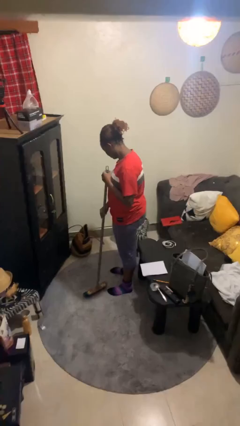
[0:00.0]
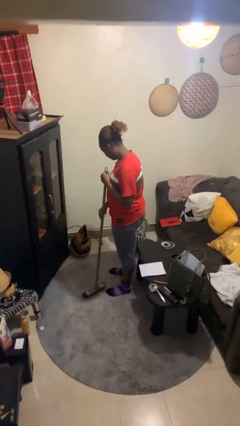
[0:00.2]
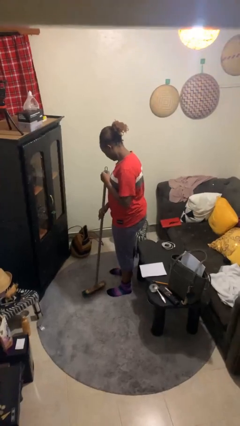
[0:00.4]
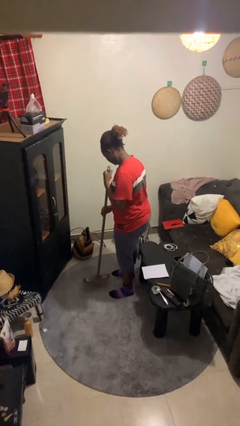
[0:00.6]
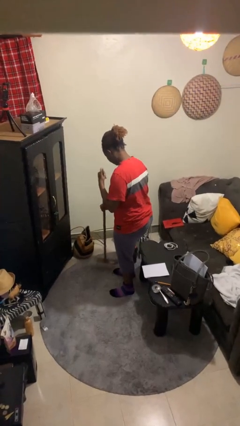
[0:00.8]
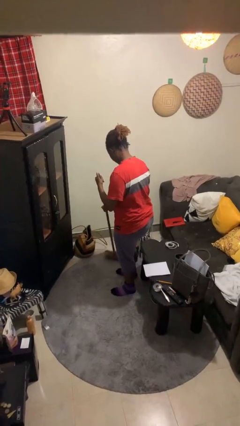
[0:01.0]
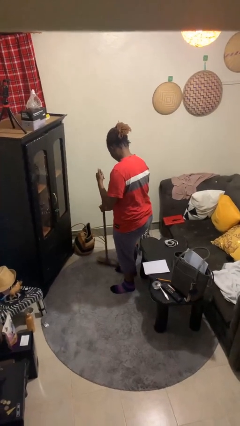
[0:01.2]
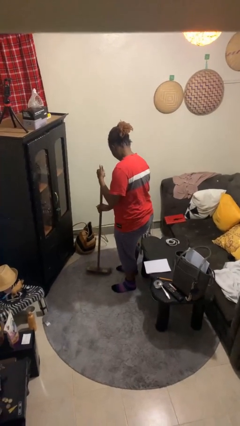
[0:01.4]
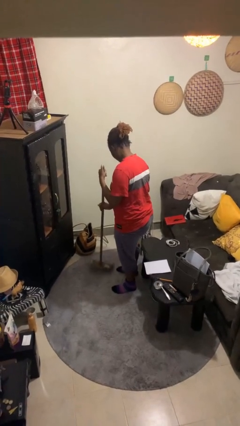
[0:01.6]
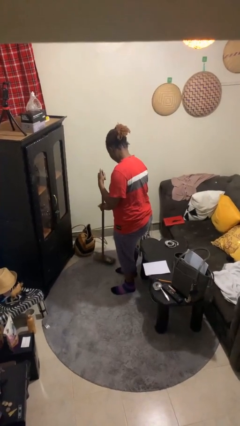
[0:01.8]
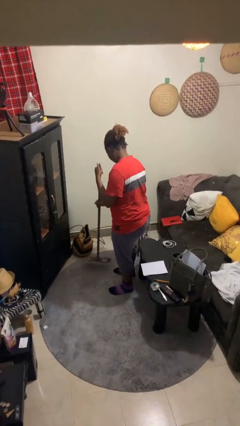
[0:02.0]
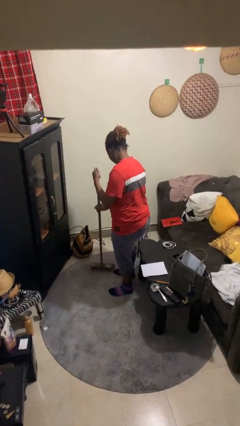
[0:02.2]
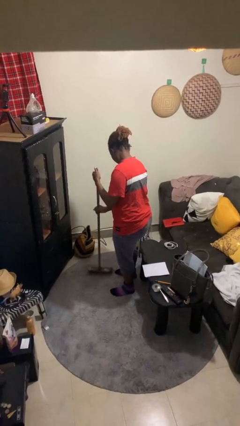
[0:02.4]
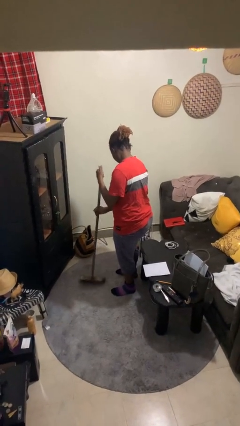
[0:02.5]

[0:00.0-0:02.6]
person sweeps floor

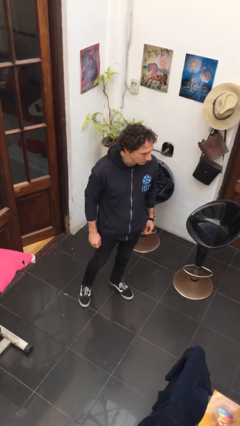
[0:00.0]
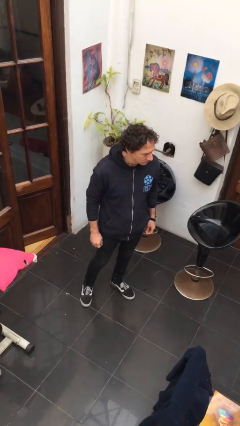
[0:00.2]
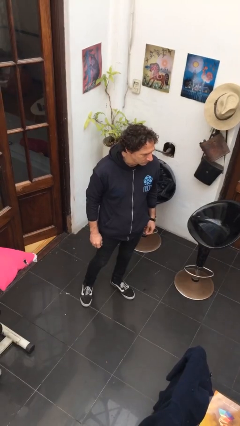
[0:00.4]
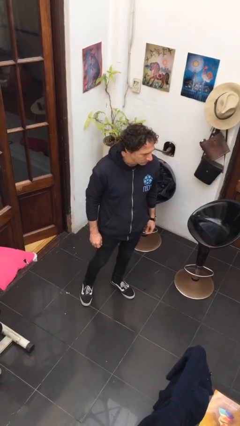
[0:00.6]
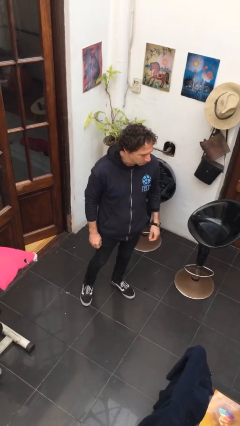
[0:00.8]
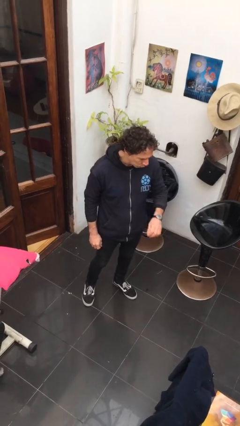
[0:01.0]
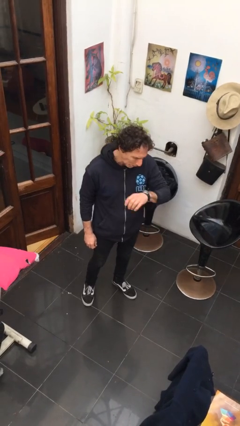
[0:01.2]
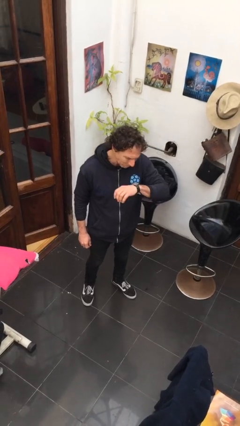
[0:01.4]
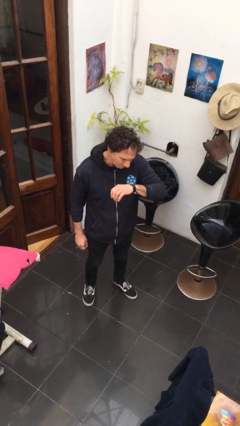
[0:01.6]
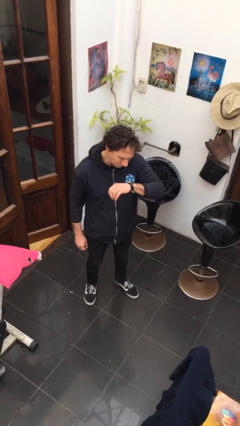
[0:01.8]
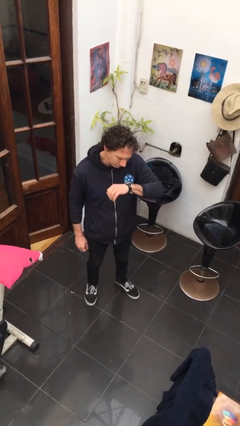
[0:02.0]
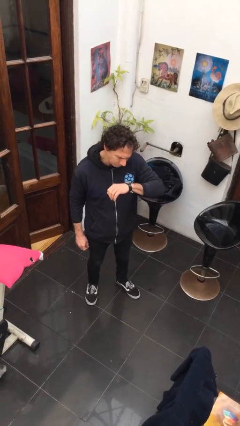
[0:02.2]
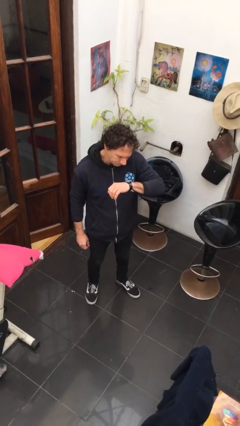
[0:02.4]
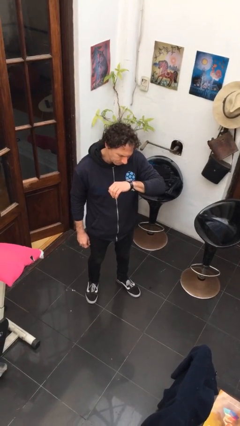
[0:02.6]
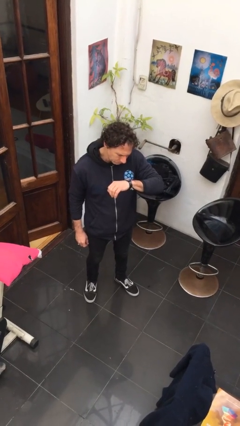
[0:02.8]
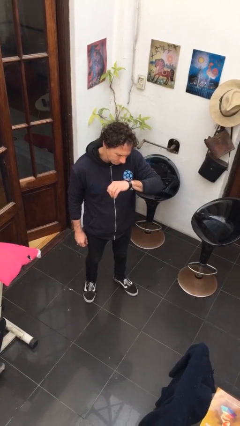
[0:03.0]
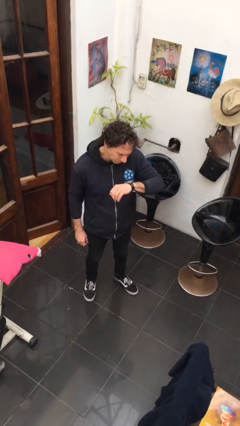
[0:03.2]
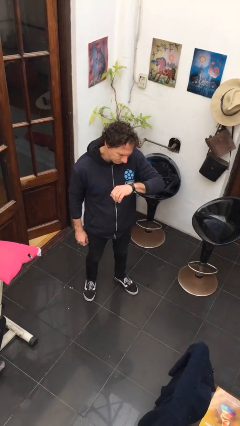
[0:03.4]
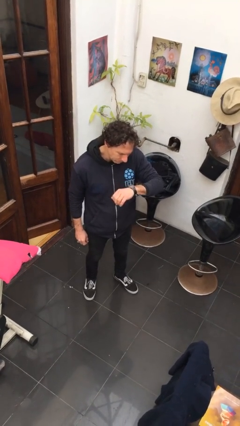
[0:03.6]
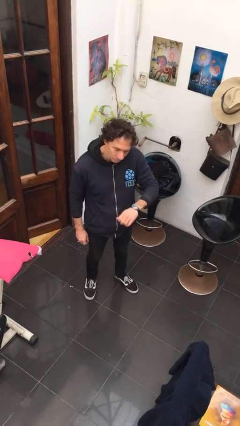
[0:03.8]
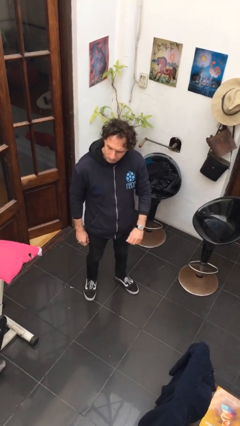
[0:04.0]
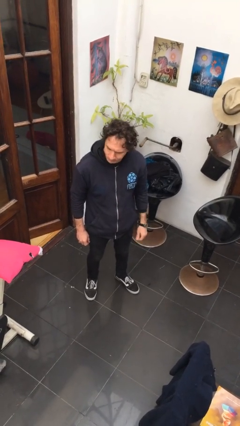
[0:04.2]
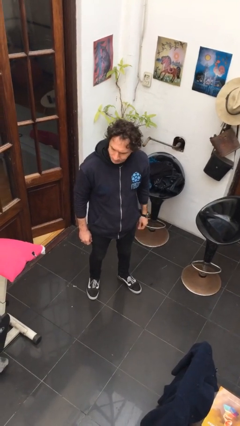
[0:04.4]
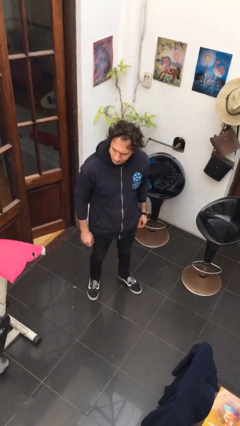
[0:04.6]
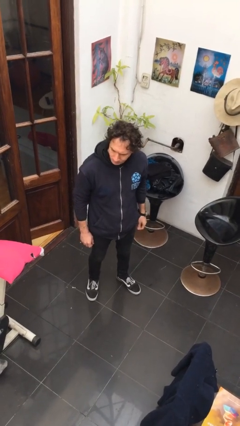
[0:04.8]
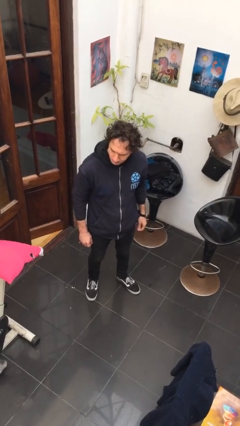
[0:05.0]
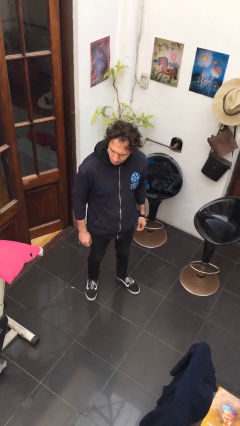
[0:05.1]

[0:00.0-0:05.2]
person looks at wristwatch

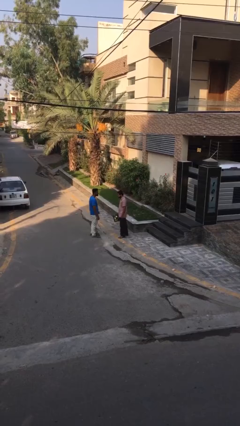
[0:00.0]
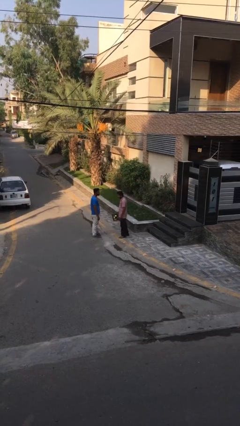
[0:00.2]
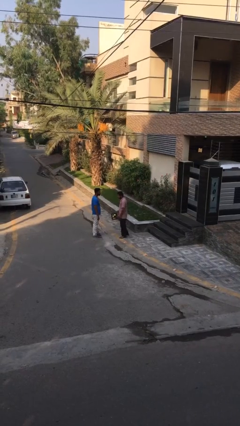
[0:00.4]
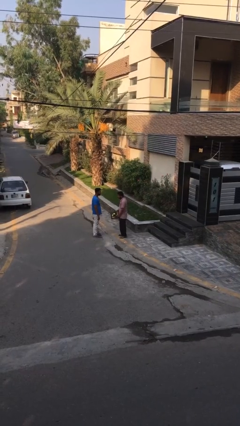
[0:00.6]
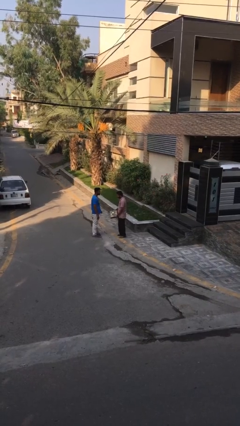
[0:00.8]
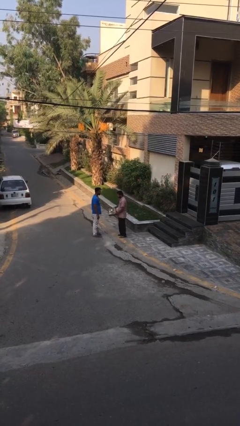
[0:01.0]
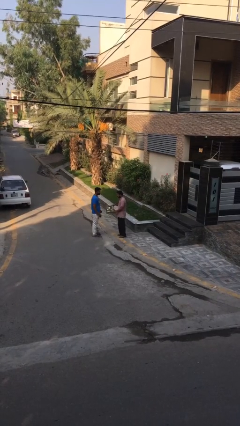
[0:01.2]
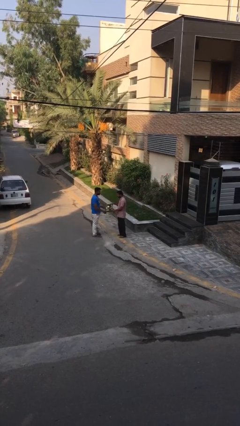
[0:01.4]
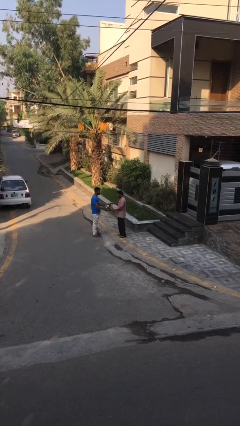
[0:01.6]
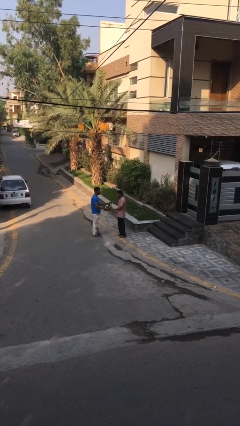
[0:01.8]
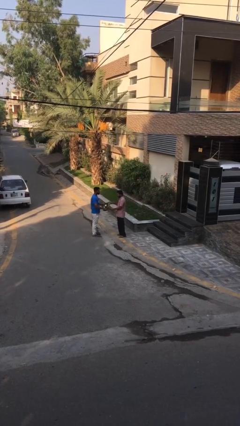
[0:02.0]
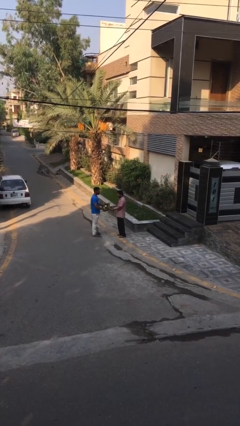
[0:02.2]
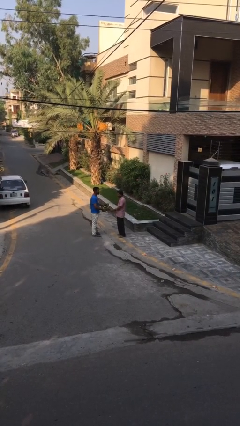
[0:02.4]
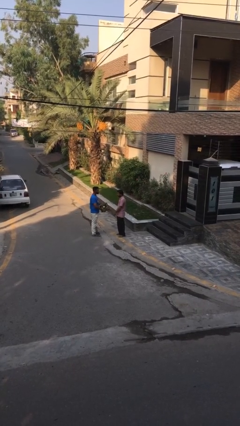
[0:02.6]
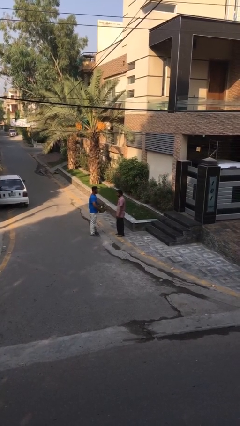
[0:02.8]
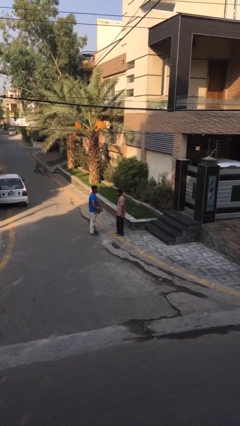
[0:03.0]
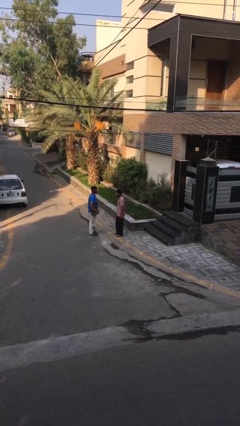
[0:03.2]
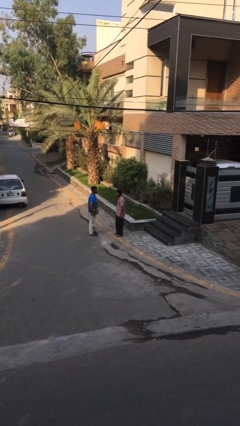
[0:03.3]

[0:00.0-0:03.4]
person transfers object to person

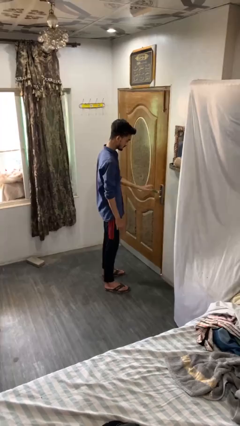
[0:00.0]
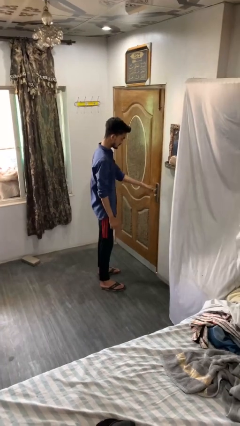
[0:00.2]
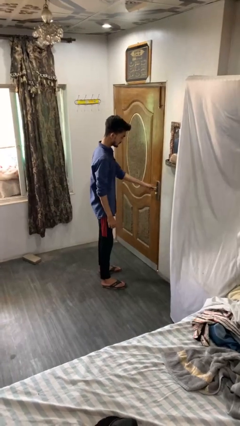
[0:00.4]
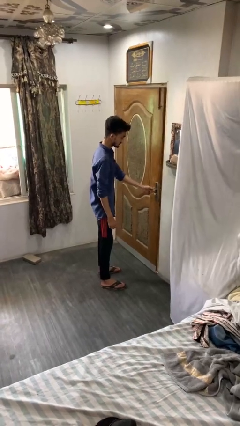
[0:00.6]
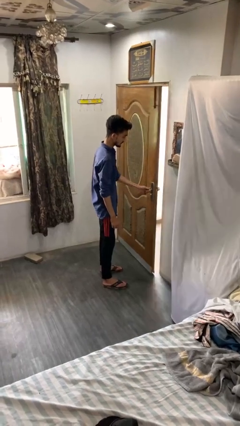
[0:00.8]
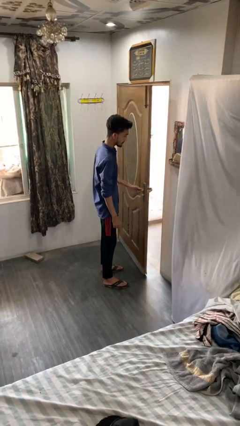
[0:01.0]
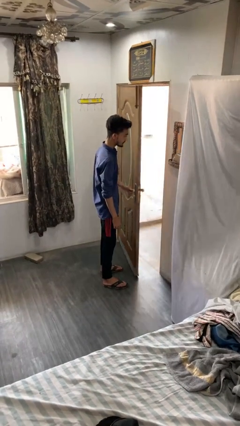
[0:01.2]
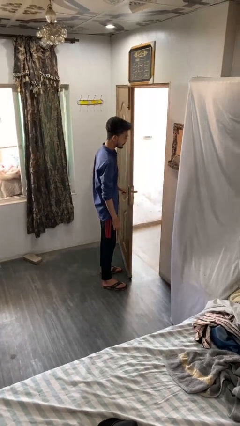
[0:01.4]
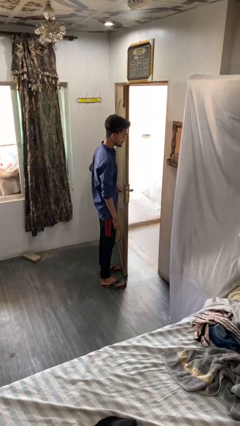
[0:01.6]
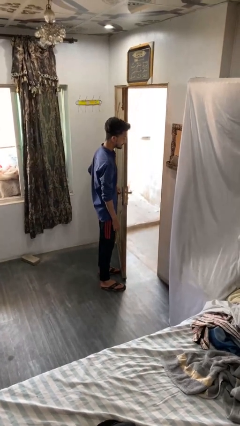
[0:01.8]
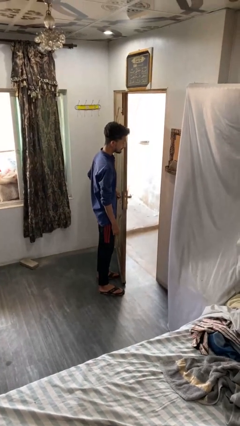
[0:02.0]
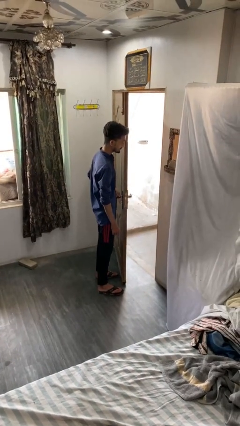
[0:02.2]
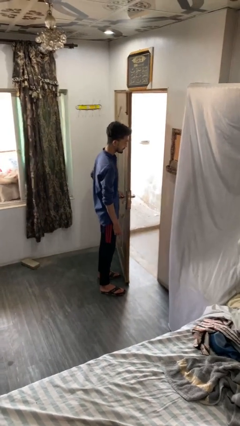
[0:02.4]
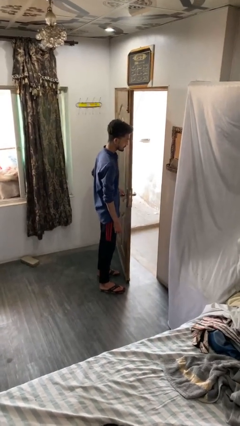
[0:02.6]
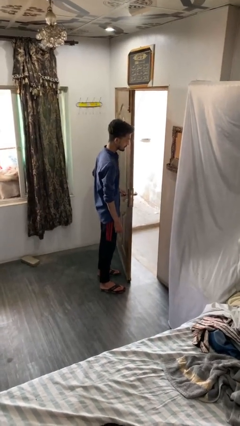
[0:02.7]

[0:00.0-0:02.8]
person opens facility door

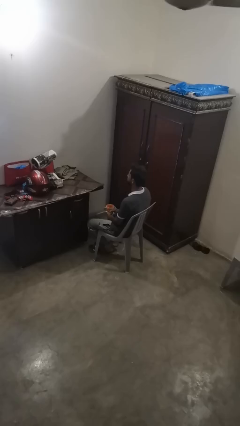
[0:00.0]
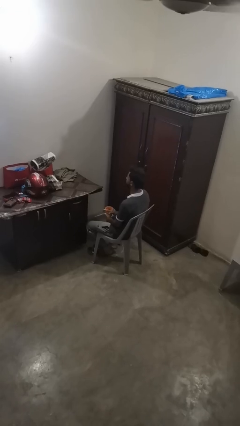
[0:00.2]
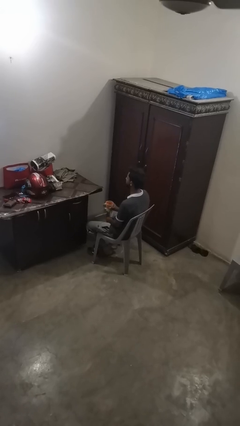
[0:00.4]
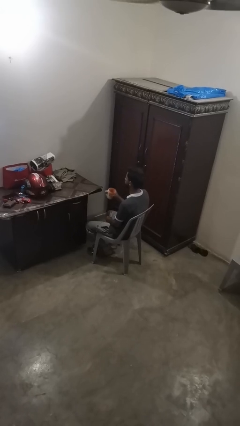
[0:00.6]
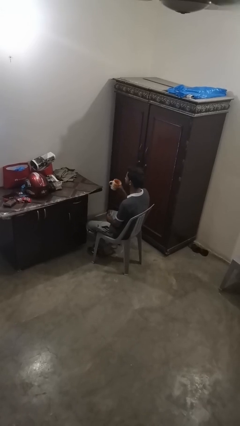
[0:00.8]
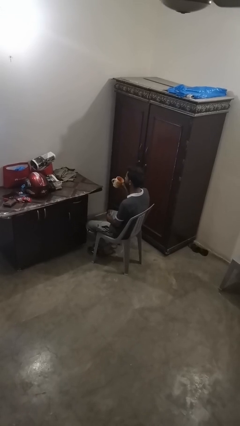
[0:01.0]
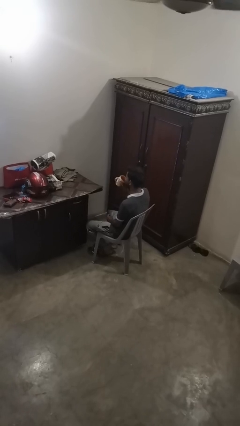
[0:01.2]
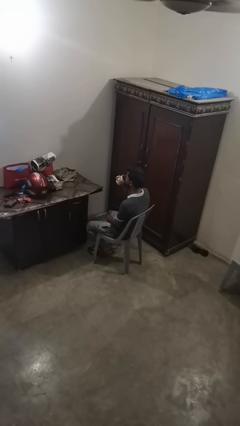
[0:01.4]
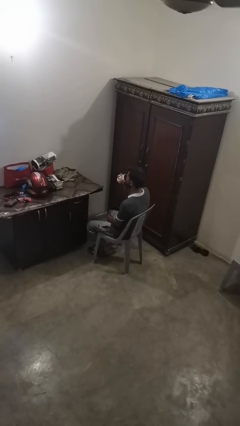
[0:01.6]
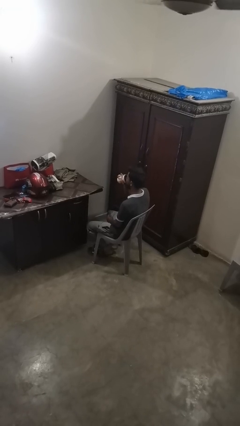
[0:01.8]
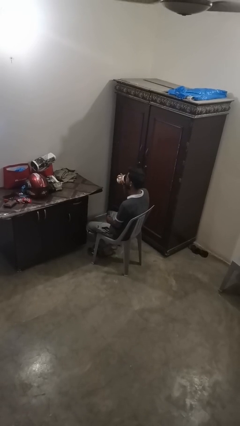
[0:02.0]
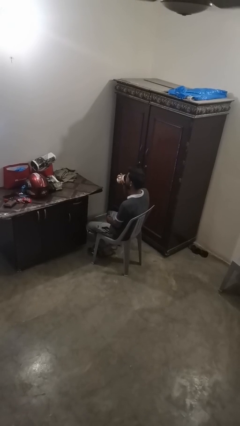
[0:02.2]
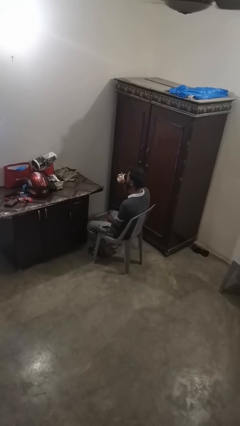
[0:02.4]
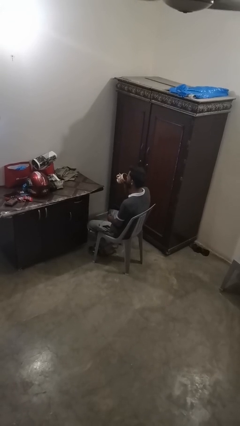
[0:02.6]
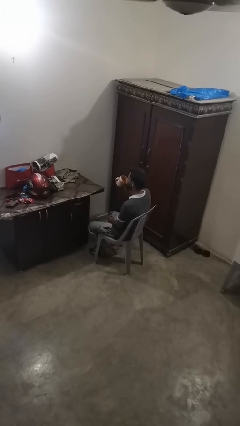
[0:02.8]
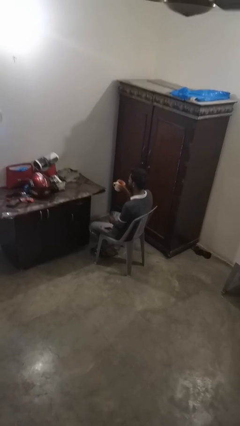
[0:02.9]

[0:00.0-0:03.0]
person drinks from mug

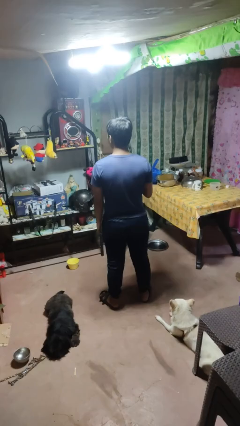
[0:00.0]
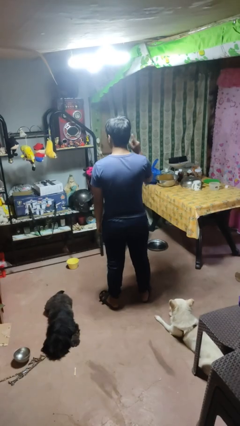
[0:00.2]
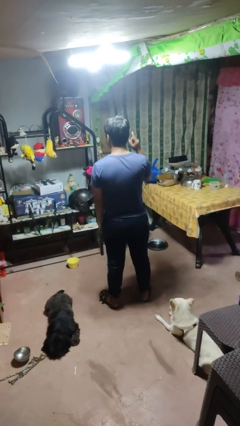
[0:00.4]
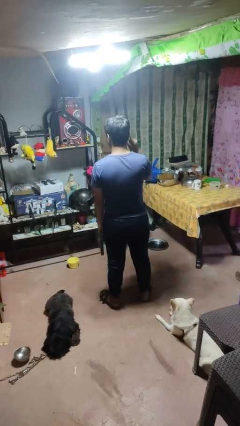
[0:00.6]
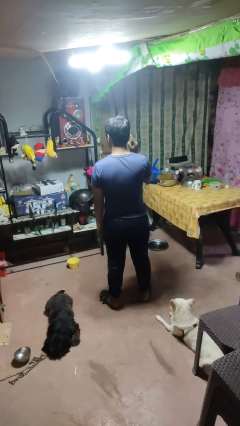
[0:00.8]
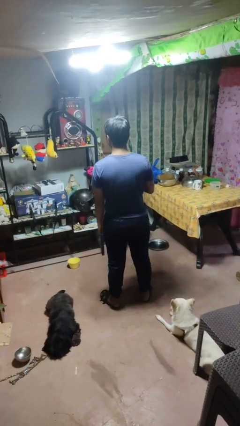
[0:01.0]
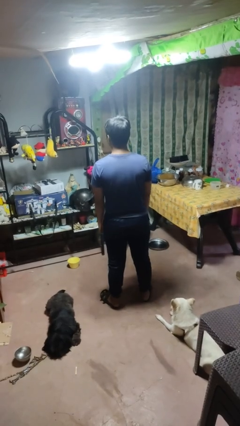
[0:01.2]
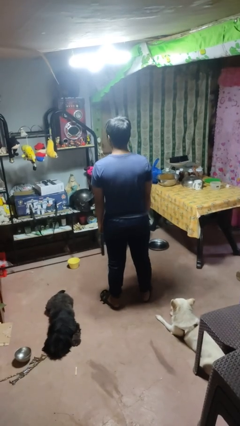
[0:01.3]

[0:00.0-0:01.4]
person gestures listen closely
